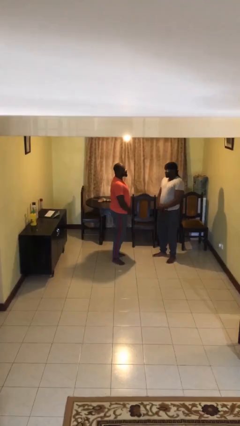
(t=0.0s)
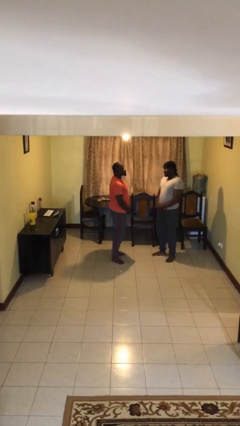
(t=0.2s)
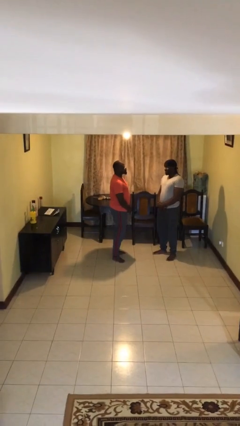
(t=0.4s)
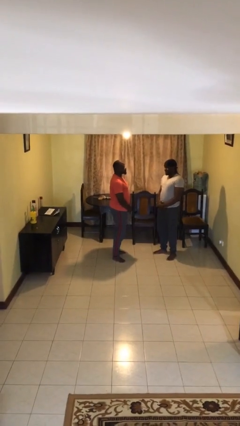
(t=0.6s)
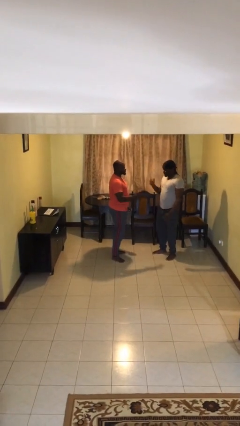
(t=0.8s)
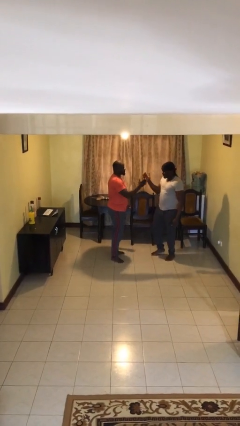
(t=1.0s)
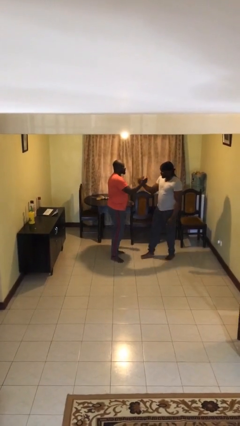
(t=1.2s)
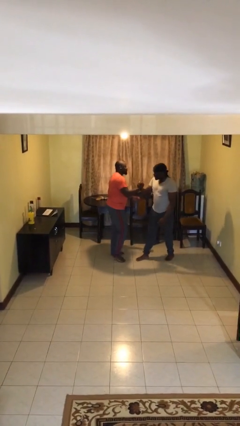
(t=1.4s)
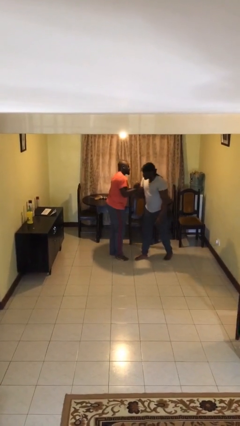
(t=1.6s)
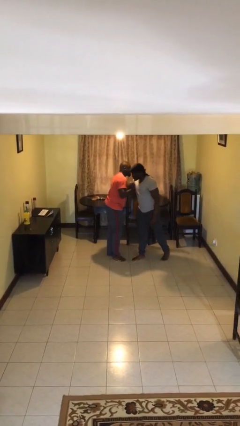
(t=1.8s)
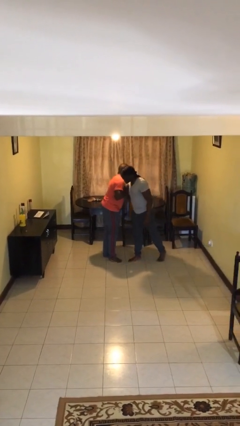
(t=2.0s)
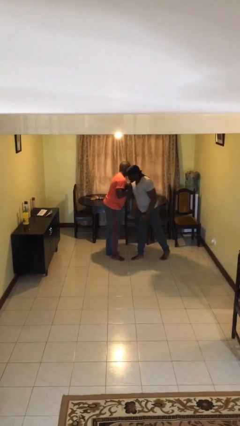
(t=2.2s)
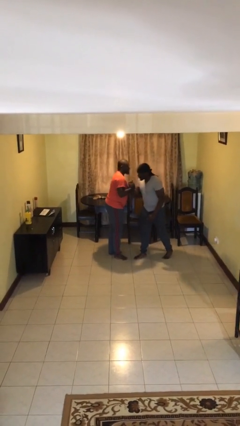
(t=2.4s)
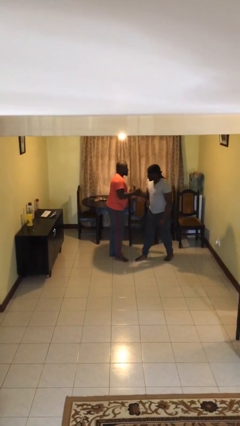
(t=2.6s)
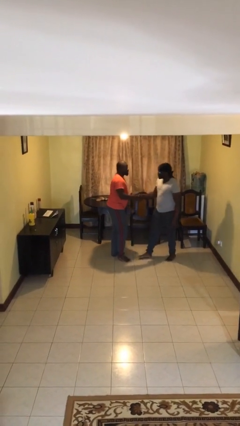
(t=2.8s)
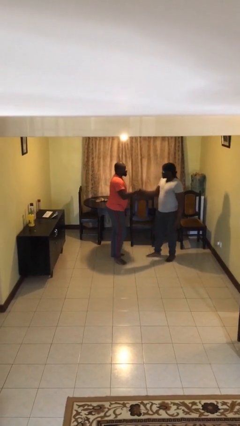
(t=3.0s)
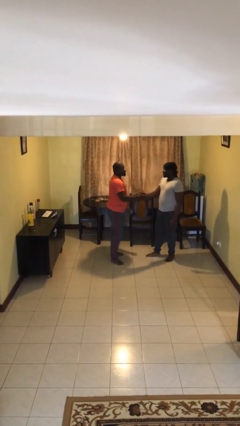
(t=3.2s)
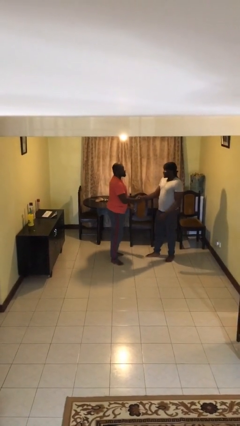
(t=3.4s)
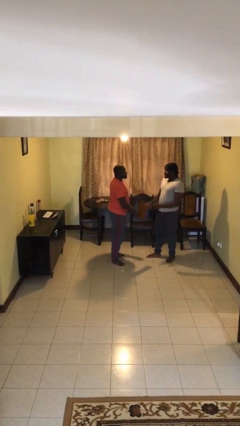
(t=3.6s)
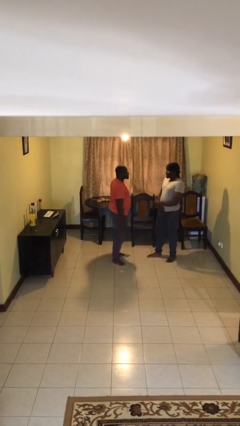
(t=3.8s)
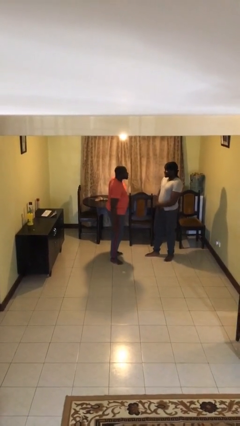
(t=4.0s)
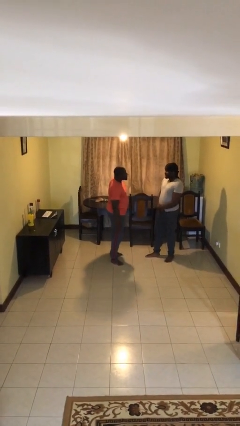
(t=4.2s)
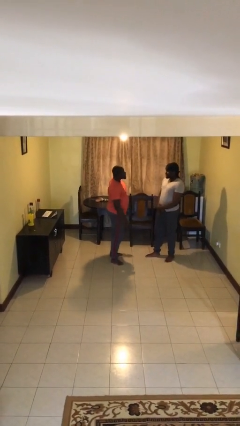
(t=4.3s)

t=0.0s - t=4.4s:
person embraces person

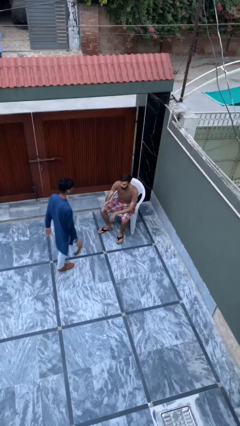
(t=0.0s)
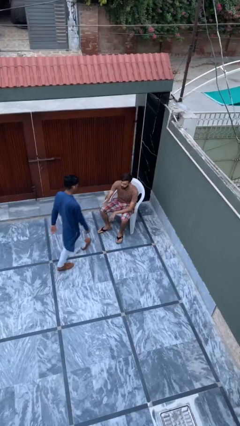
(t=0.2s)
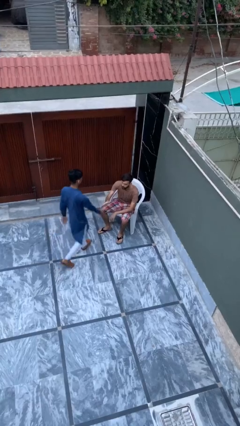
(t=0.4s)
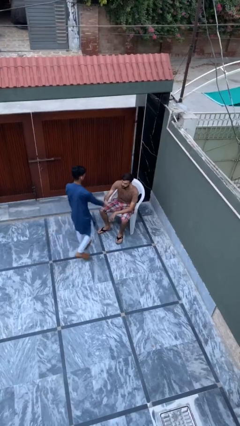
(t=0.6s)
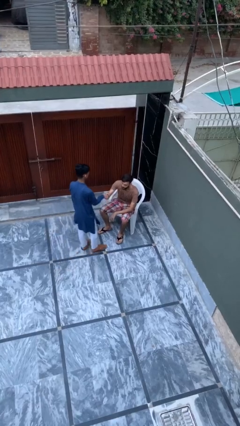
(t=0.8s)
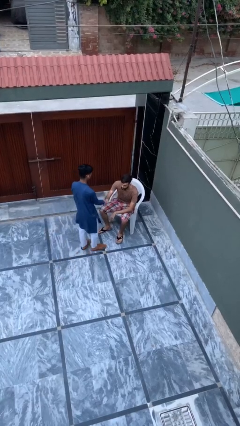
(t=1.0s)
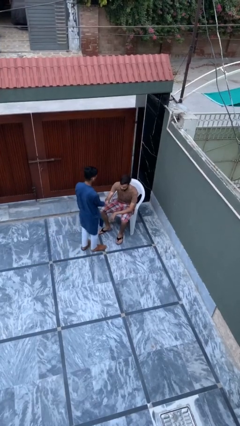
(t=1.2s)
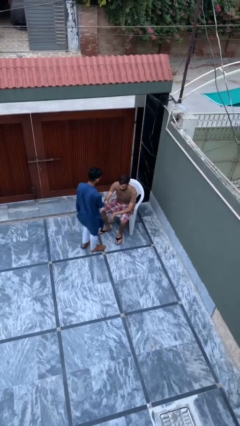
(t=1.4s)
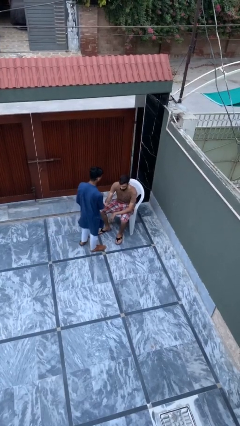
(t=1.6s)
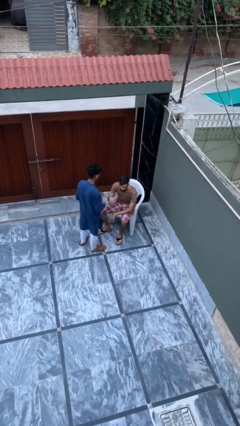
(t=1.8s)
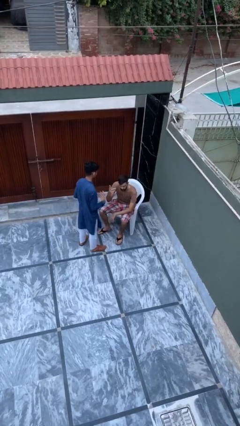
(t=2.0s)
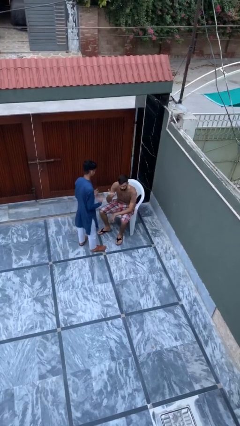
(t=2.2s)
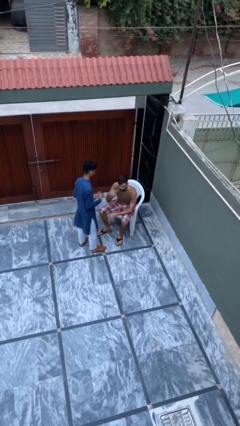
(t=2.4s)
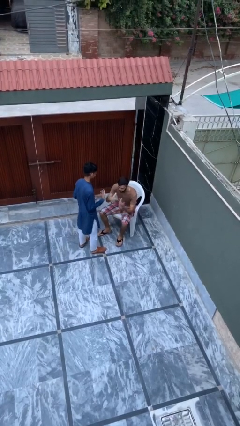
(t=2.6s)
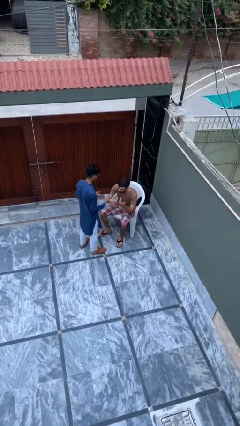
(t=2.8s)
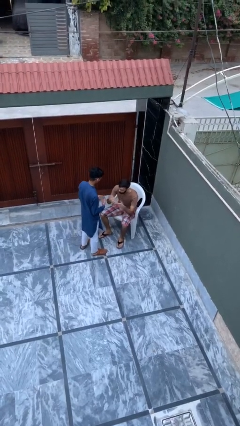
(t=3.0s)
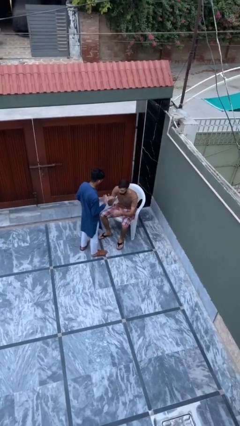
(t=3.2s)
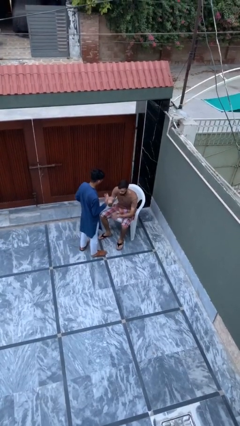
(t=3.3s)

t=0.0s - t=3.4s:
person shakes hand

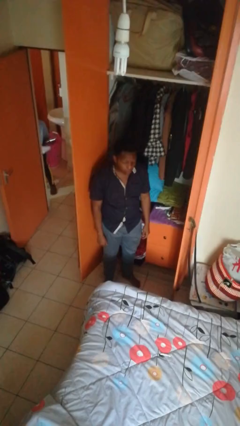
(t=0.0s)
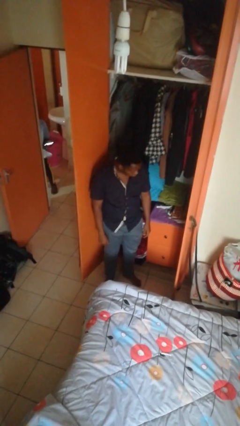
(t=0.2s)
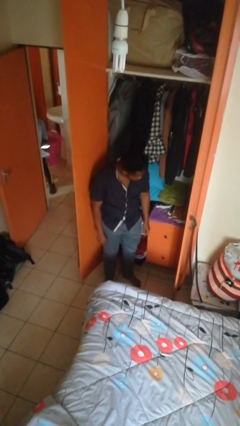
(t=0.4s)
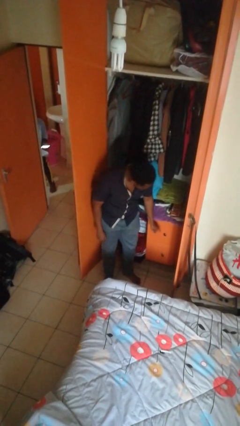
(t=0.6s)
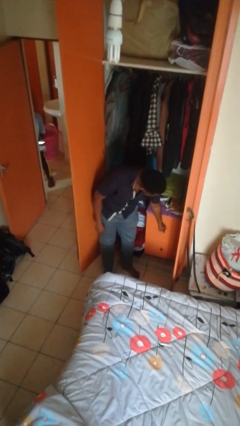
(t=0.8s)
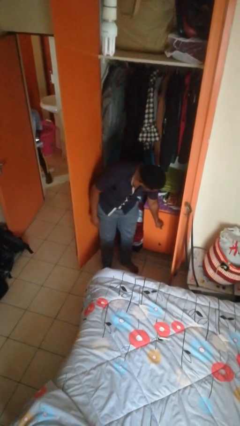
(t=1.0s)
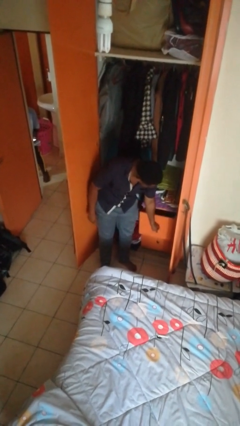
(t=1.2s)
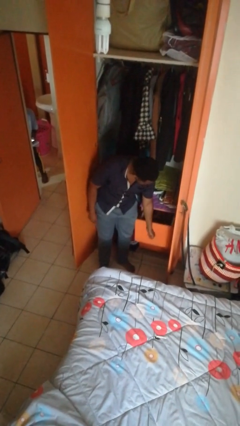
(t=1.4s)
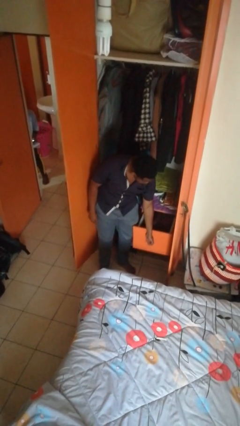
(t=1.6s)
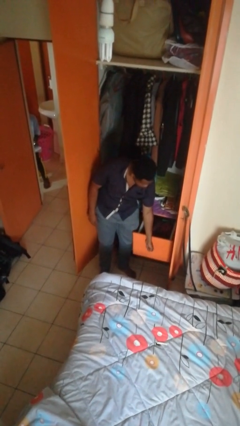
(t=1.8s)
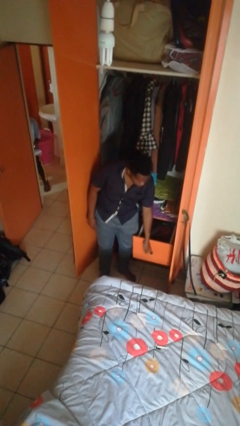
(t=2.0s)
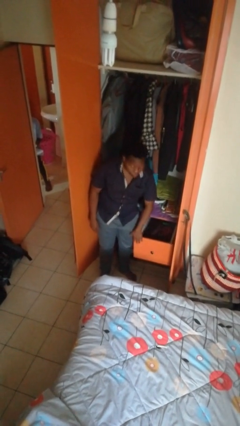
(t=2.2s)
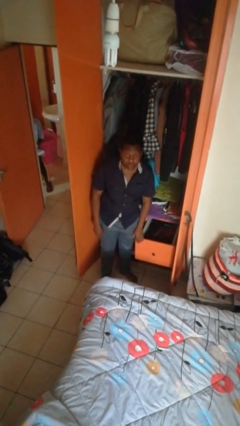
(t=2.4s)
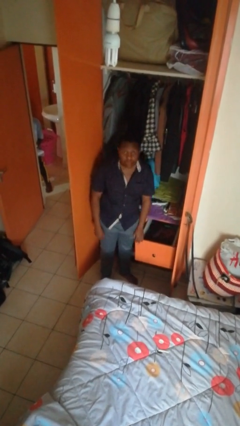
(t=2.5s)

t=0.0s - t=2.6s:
person opens dresser drawer

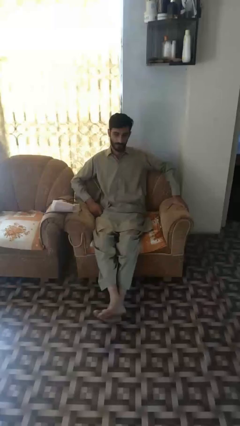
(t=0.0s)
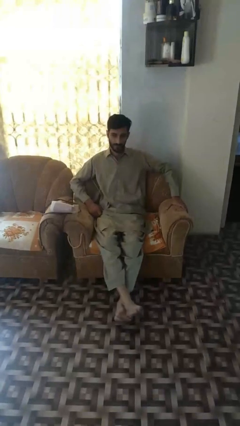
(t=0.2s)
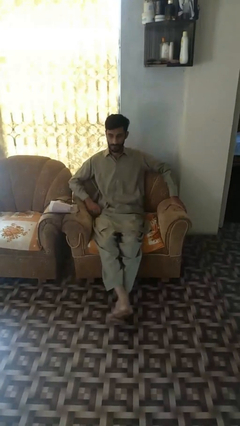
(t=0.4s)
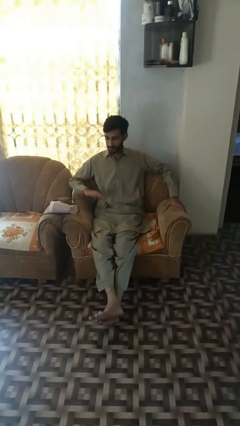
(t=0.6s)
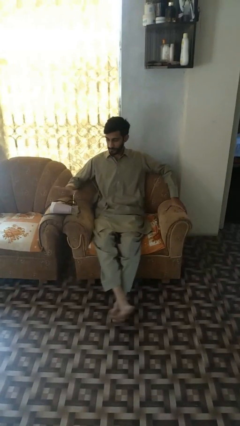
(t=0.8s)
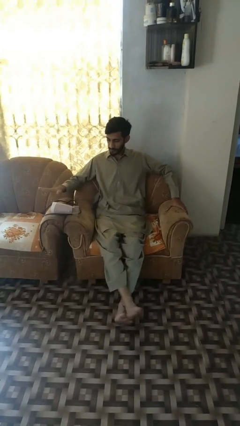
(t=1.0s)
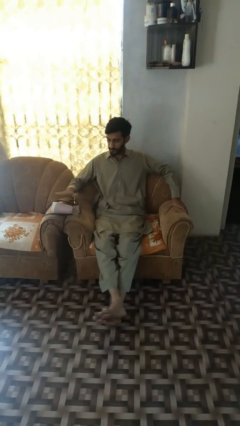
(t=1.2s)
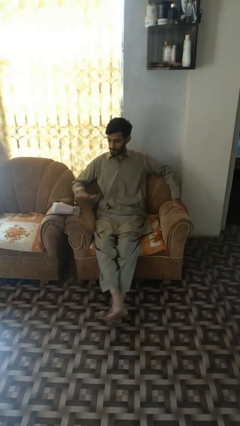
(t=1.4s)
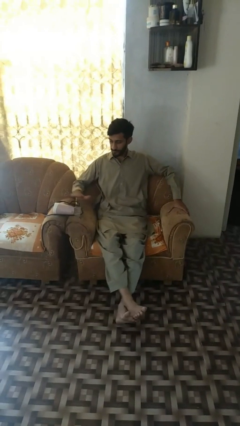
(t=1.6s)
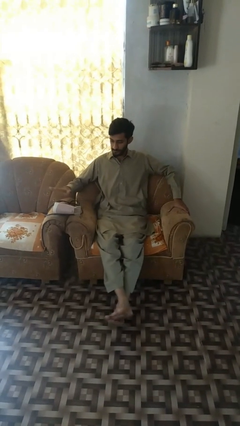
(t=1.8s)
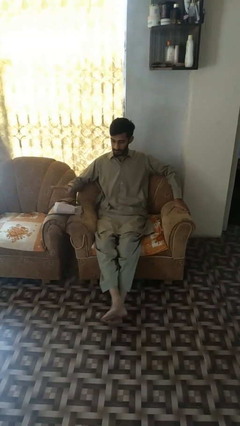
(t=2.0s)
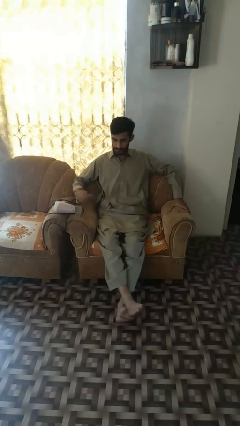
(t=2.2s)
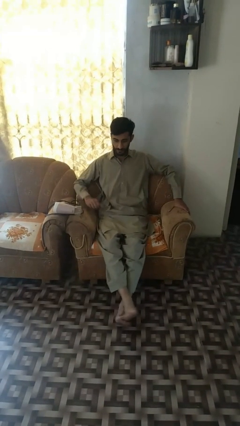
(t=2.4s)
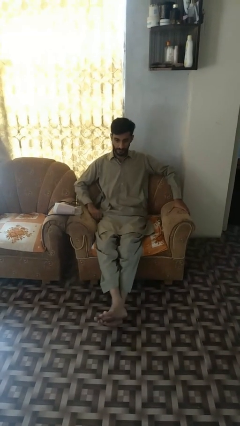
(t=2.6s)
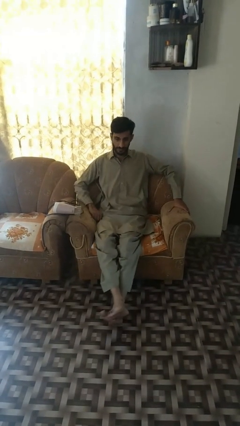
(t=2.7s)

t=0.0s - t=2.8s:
person waves hand over object

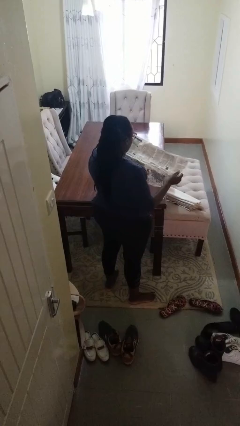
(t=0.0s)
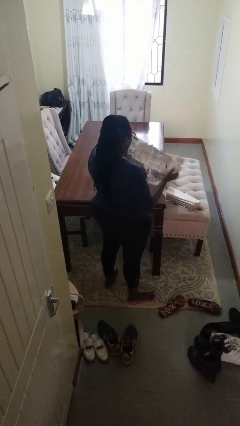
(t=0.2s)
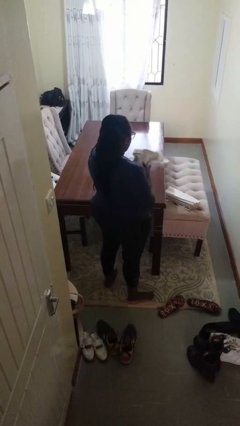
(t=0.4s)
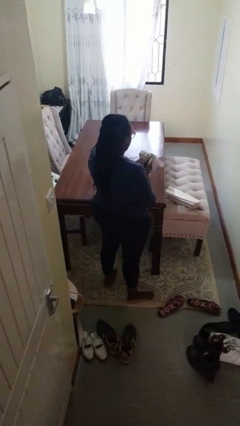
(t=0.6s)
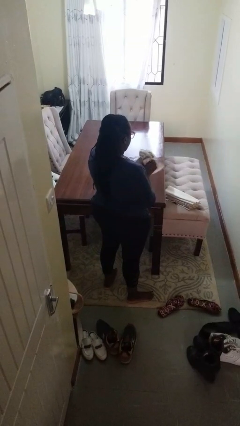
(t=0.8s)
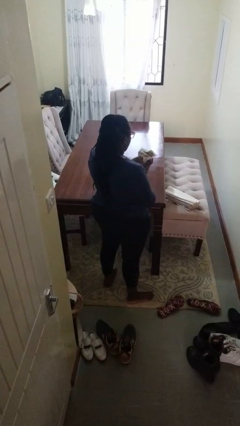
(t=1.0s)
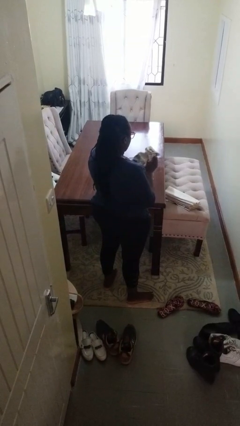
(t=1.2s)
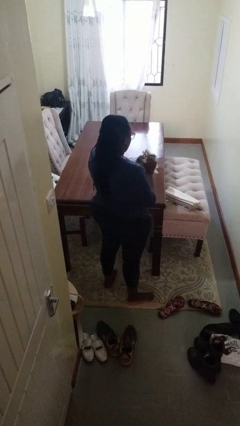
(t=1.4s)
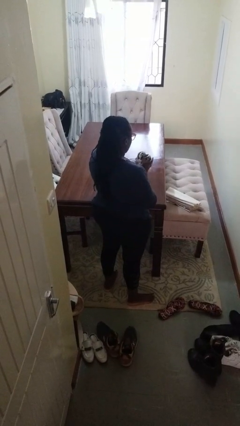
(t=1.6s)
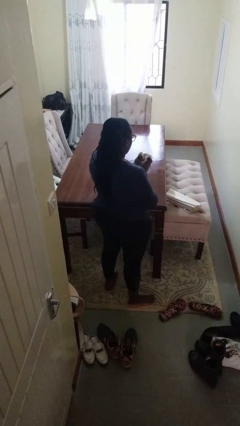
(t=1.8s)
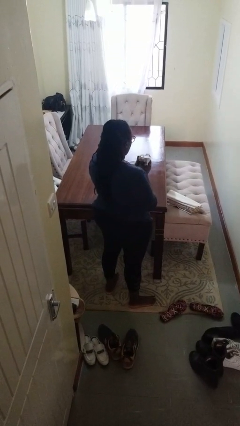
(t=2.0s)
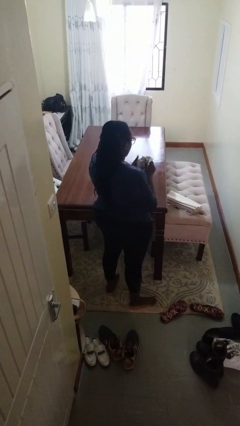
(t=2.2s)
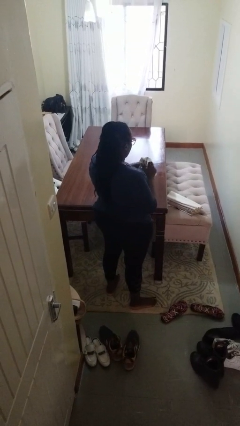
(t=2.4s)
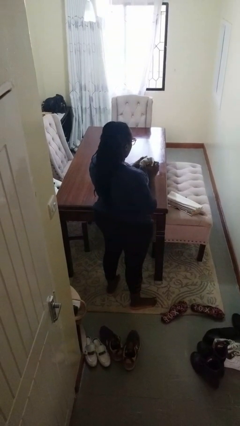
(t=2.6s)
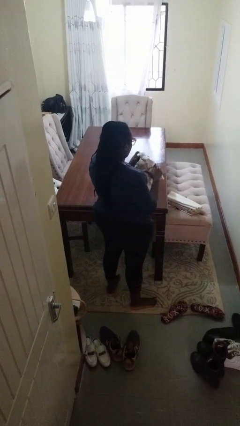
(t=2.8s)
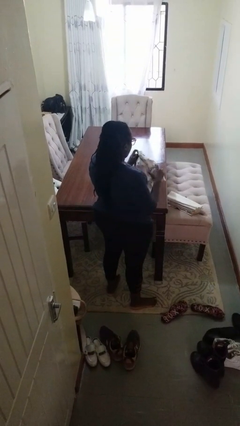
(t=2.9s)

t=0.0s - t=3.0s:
person crumples paper

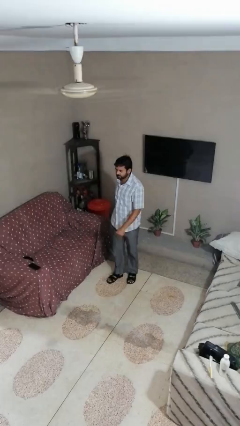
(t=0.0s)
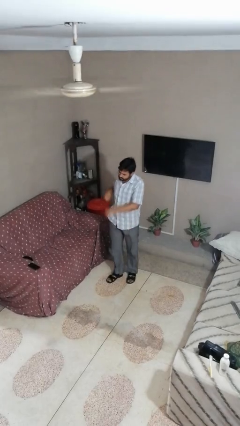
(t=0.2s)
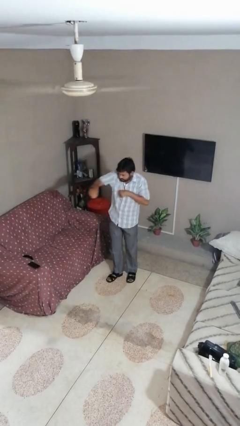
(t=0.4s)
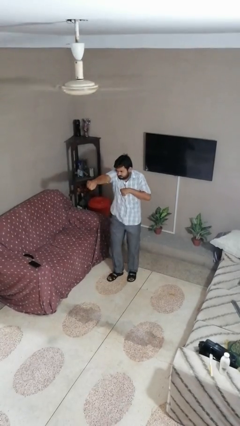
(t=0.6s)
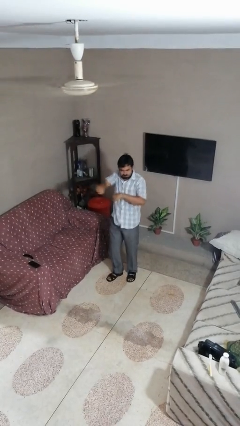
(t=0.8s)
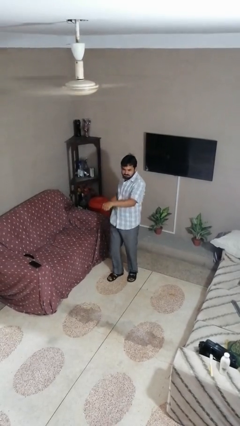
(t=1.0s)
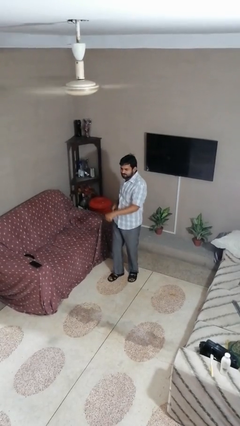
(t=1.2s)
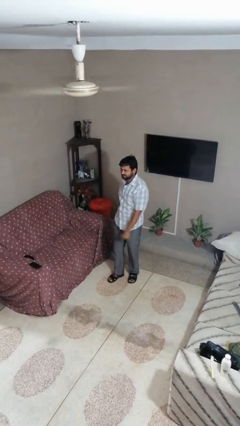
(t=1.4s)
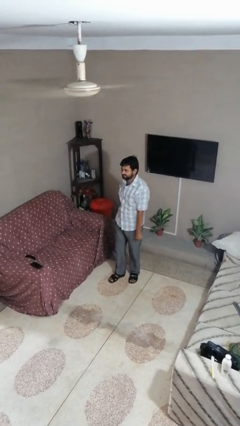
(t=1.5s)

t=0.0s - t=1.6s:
person karate chop
